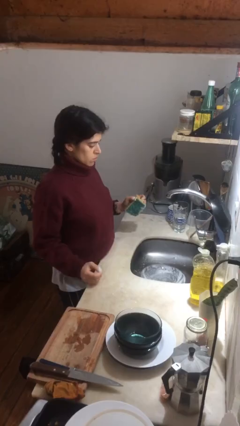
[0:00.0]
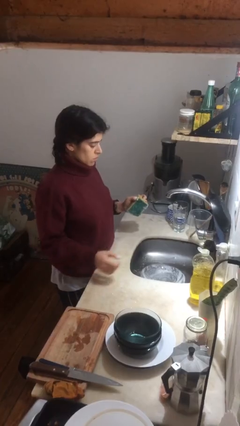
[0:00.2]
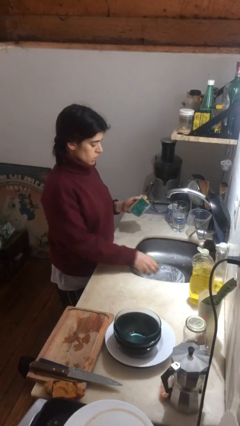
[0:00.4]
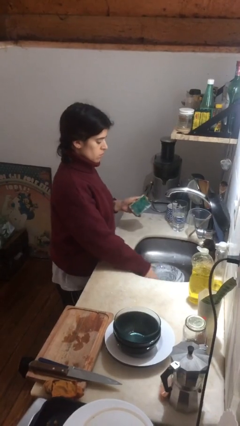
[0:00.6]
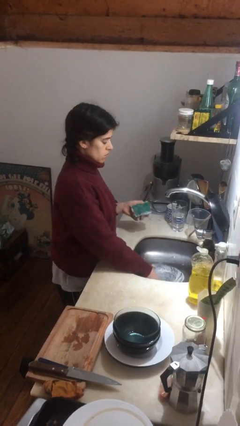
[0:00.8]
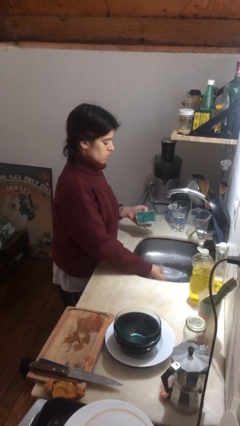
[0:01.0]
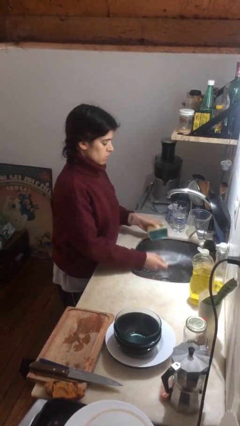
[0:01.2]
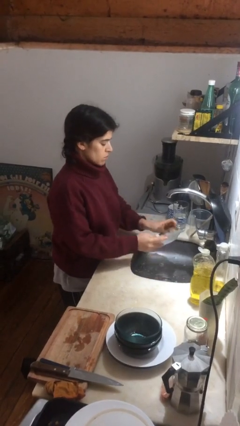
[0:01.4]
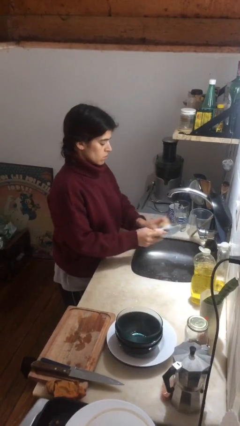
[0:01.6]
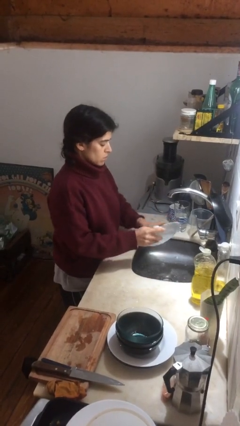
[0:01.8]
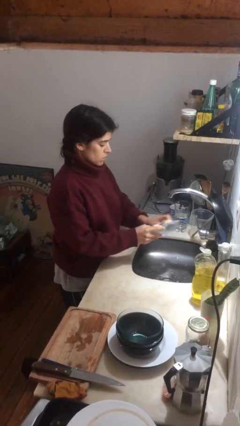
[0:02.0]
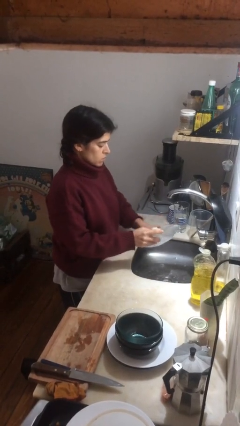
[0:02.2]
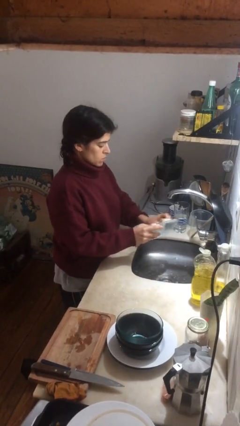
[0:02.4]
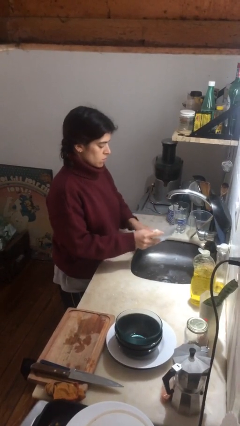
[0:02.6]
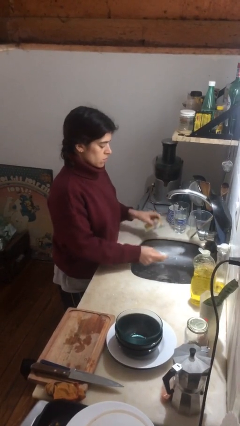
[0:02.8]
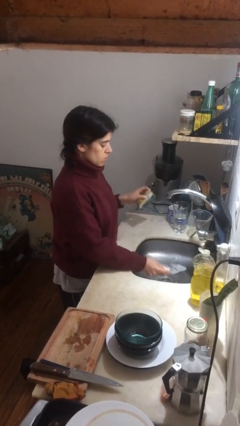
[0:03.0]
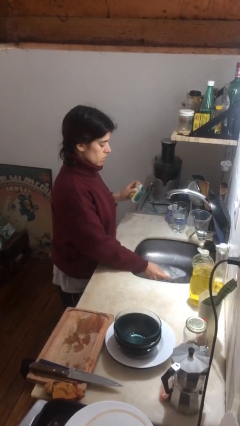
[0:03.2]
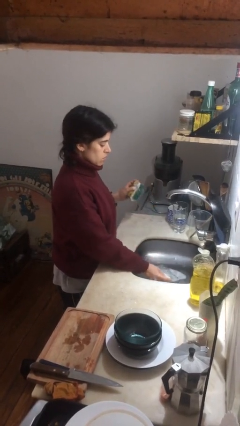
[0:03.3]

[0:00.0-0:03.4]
person washes dish

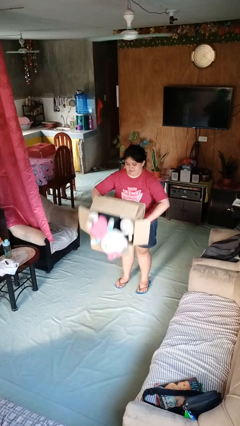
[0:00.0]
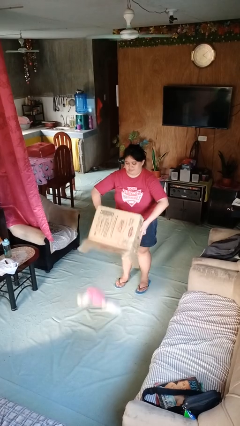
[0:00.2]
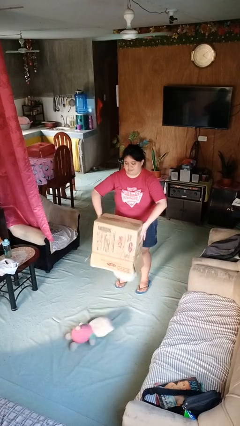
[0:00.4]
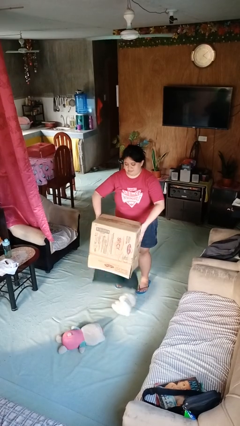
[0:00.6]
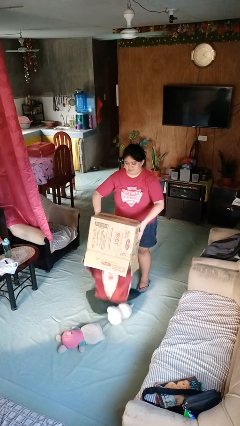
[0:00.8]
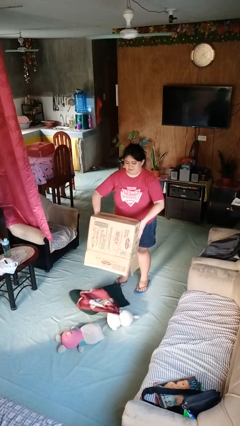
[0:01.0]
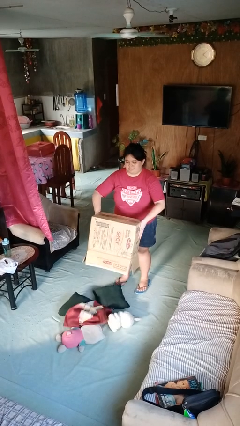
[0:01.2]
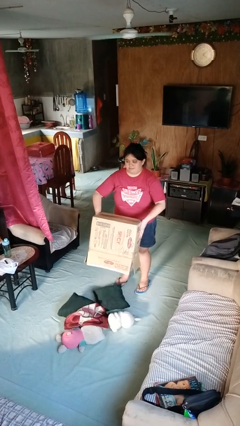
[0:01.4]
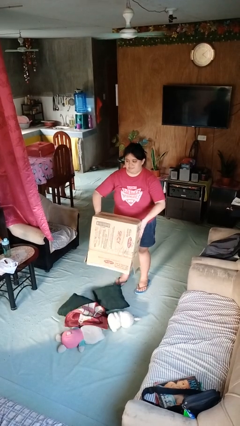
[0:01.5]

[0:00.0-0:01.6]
person unloads box onto floor

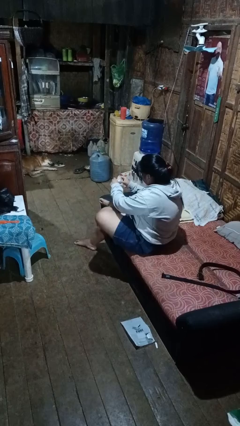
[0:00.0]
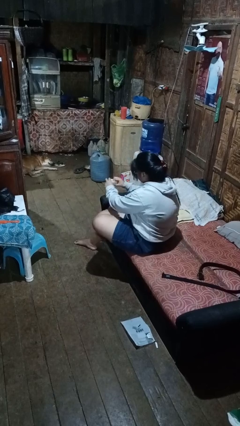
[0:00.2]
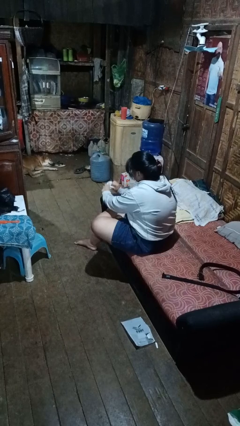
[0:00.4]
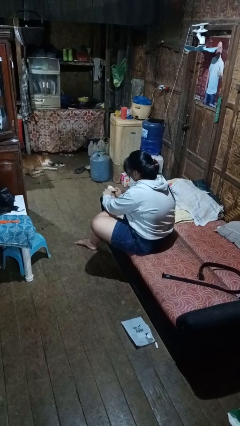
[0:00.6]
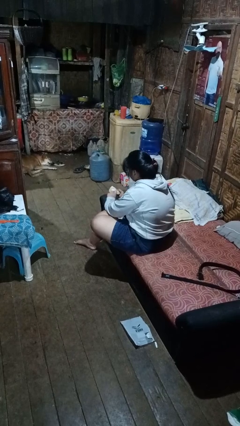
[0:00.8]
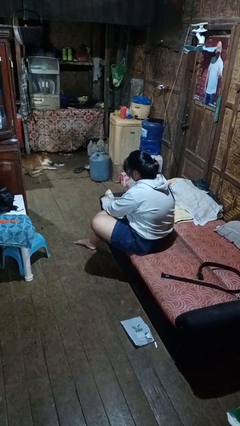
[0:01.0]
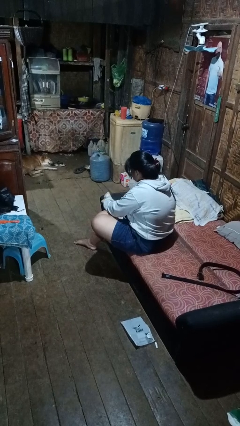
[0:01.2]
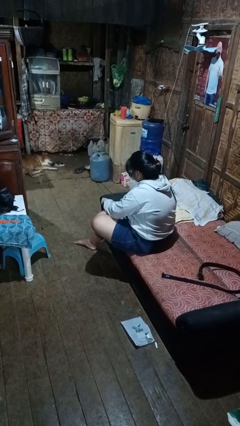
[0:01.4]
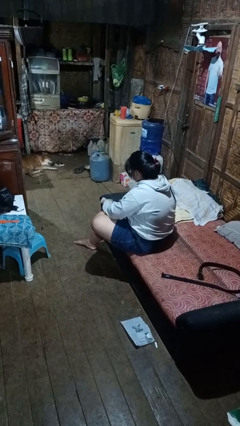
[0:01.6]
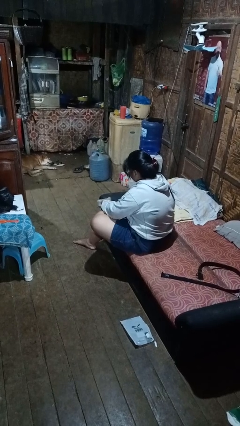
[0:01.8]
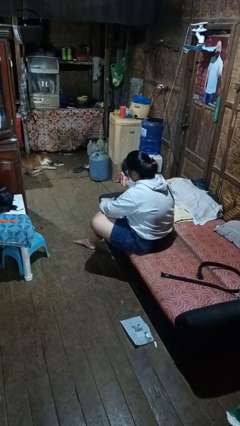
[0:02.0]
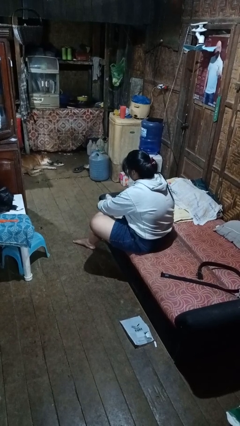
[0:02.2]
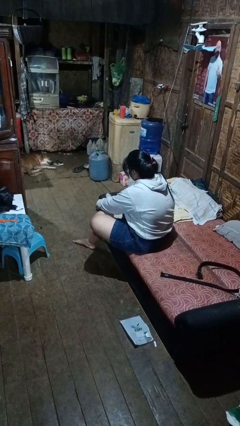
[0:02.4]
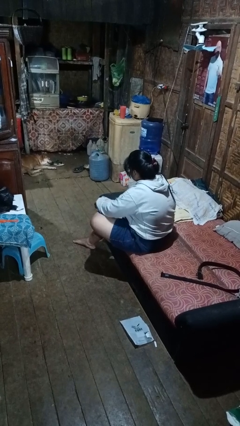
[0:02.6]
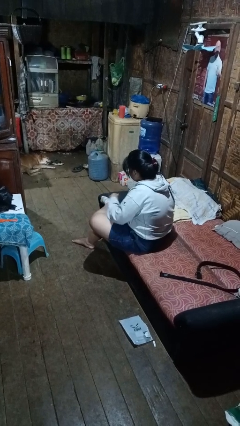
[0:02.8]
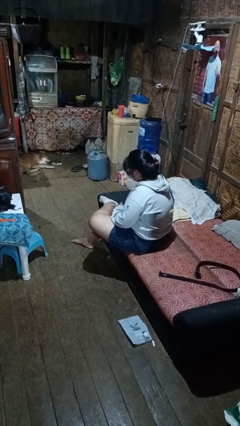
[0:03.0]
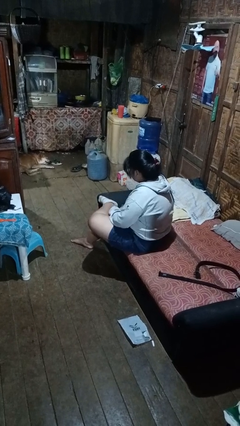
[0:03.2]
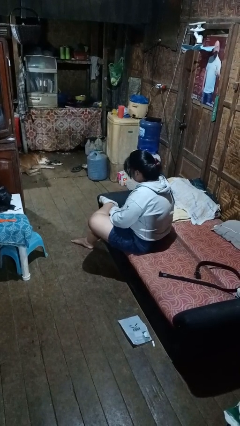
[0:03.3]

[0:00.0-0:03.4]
person puts on socks

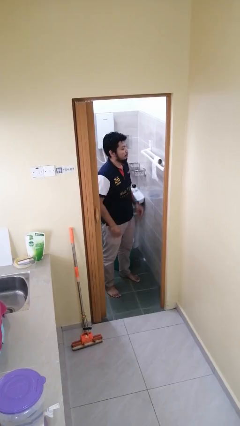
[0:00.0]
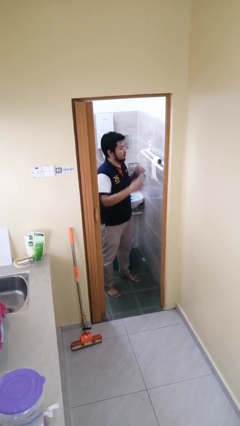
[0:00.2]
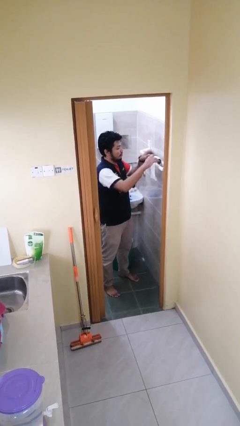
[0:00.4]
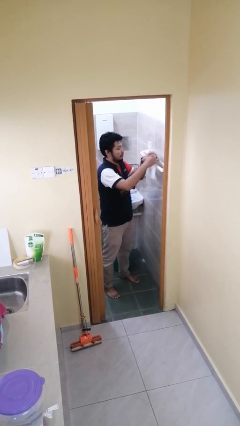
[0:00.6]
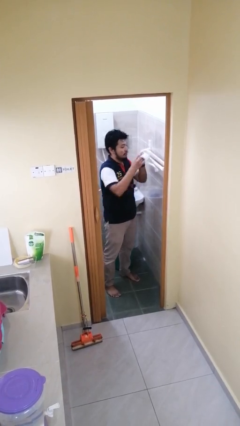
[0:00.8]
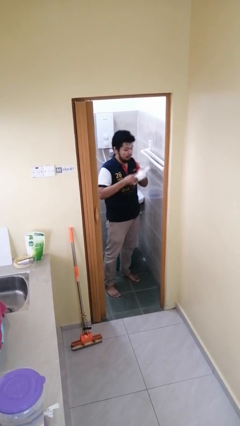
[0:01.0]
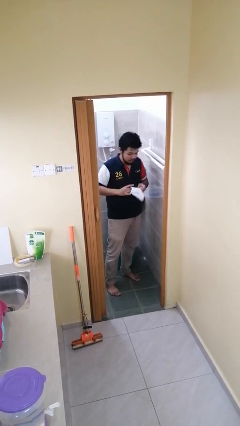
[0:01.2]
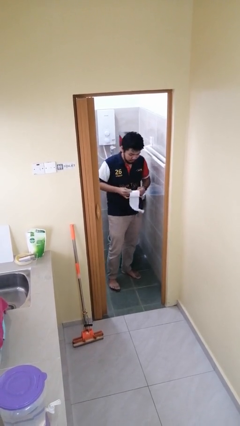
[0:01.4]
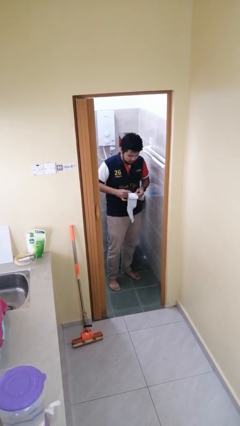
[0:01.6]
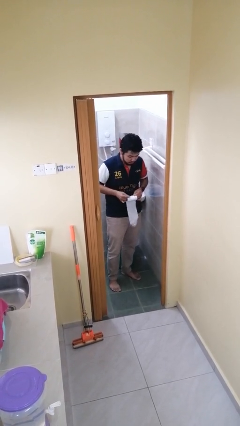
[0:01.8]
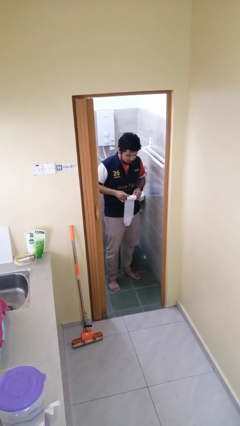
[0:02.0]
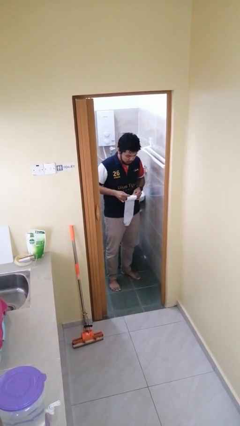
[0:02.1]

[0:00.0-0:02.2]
person picks up object from countertop

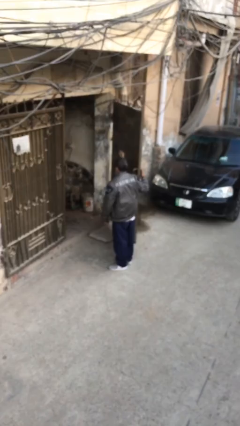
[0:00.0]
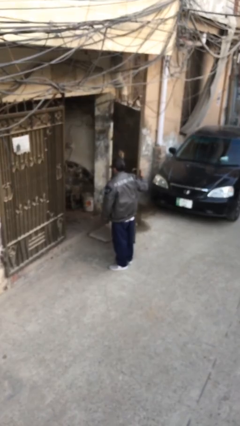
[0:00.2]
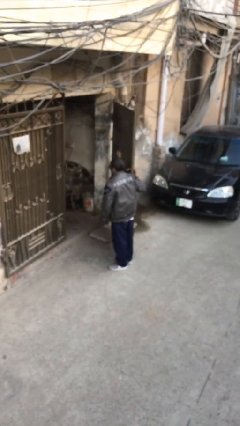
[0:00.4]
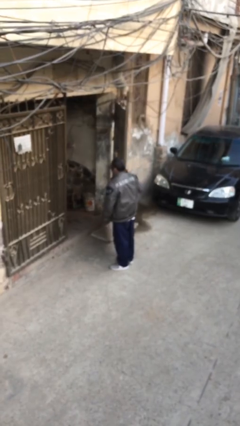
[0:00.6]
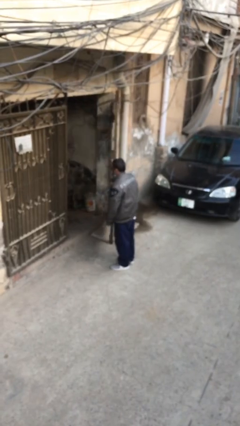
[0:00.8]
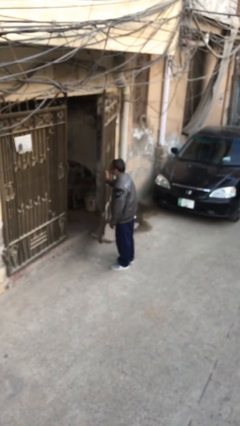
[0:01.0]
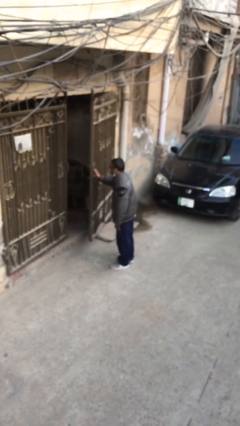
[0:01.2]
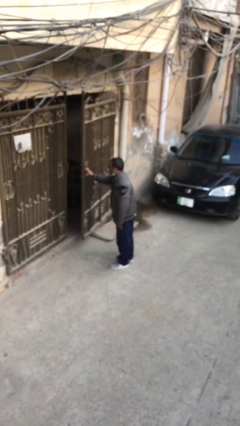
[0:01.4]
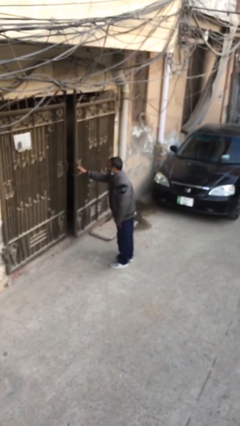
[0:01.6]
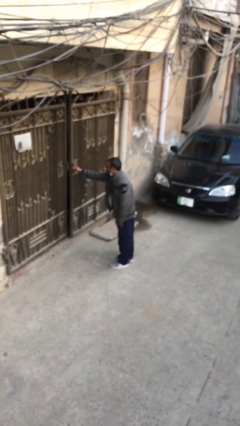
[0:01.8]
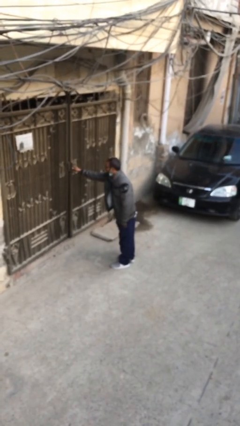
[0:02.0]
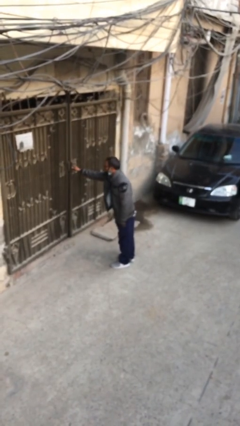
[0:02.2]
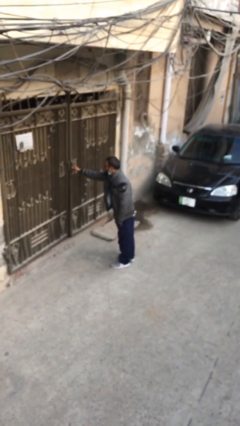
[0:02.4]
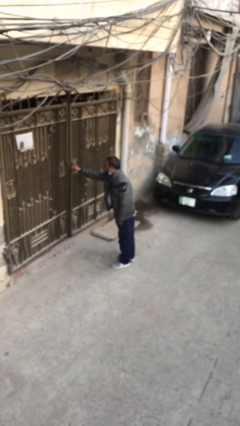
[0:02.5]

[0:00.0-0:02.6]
person closes facility door

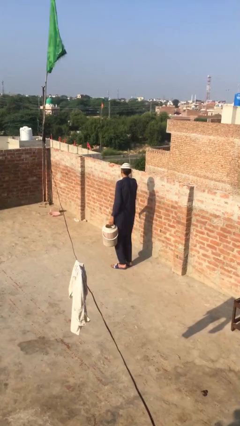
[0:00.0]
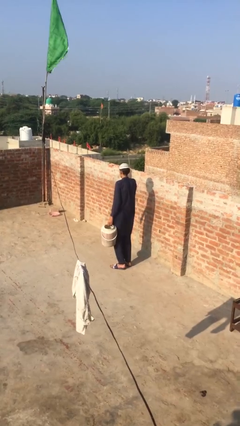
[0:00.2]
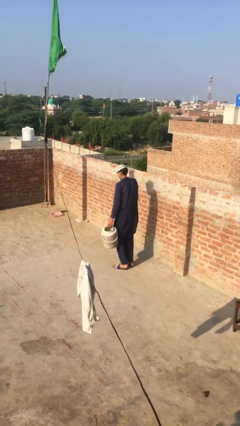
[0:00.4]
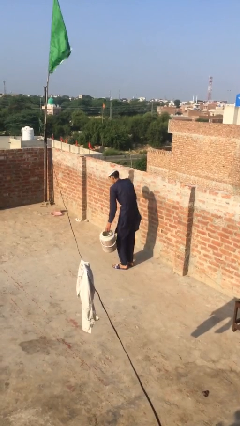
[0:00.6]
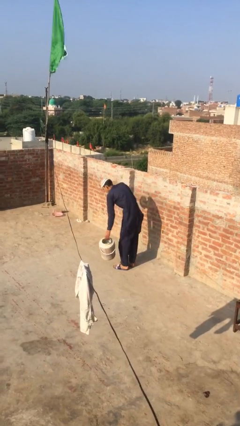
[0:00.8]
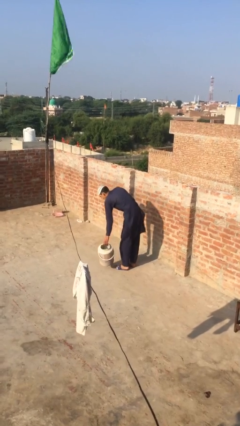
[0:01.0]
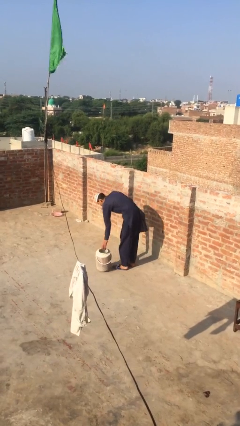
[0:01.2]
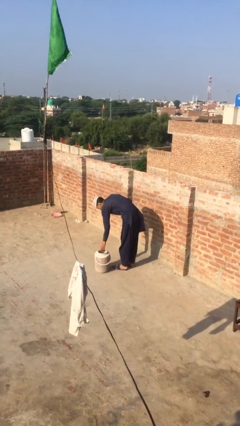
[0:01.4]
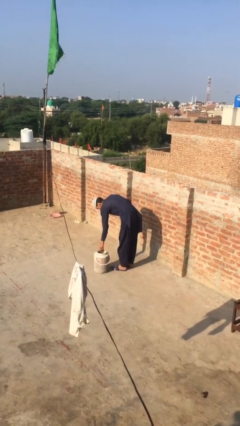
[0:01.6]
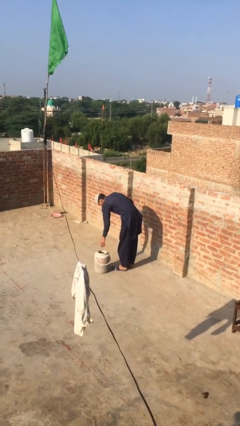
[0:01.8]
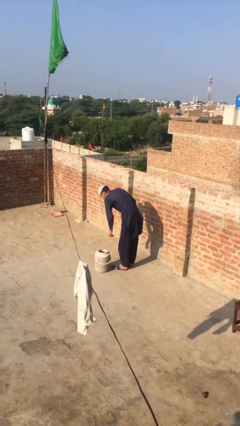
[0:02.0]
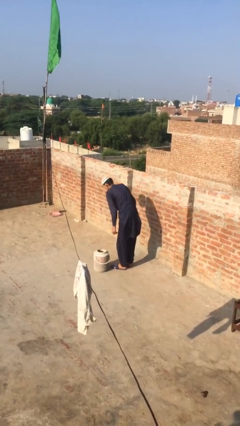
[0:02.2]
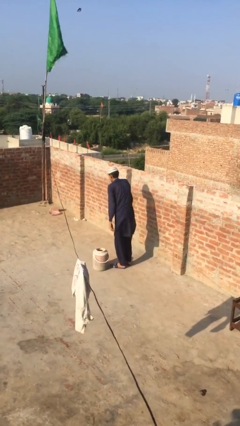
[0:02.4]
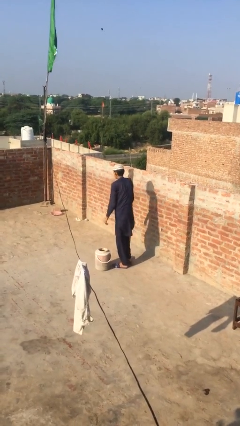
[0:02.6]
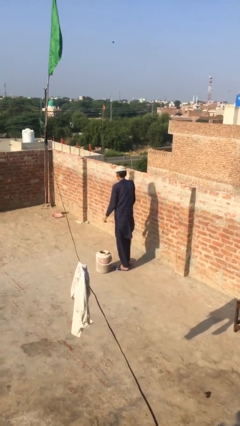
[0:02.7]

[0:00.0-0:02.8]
person puts down object on floor

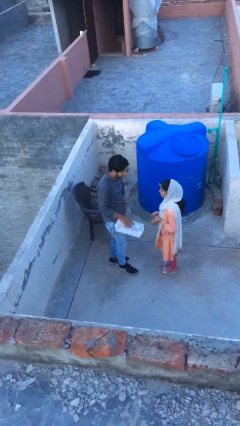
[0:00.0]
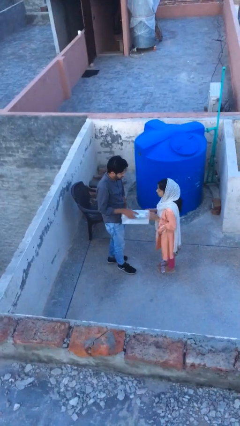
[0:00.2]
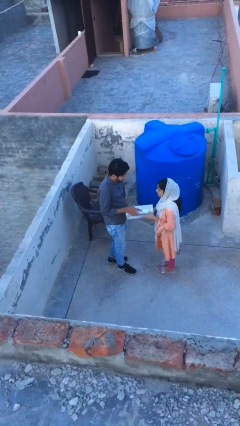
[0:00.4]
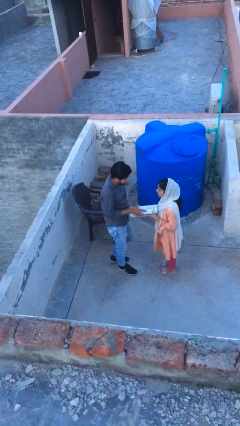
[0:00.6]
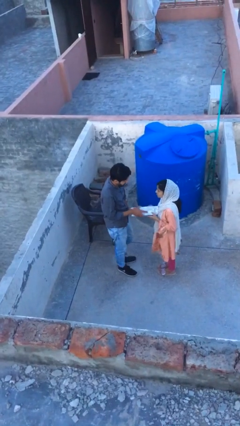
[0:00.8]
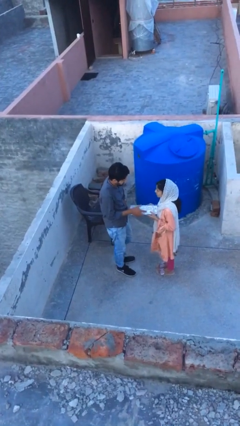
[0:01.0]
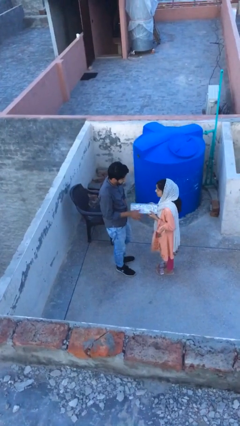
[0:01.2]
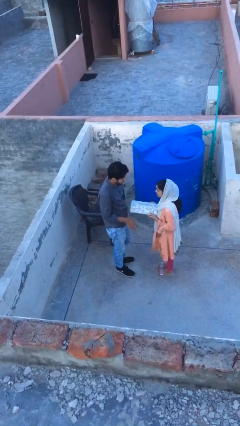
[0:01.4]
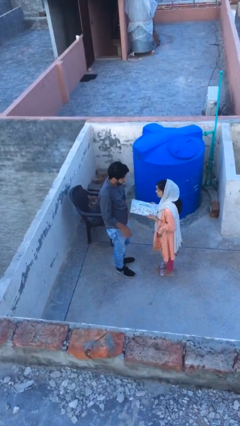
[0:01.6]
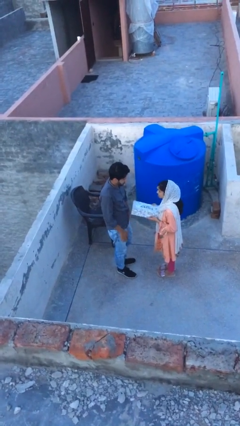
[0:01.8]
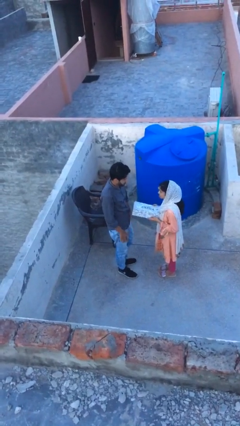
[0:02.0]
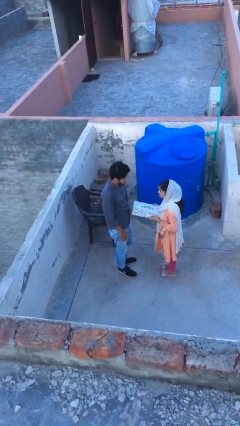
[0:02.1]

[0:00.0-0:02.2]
person transfers object to person
